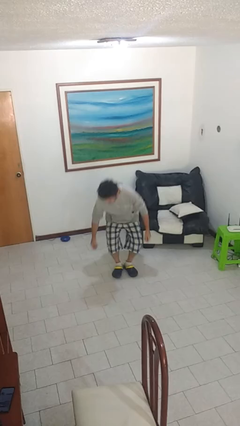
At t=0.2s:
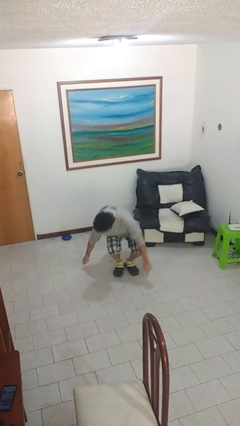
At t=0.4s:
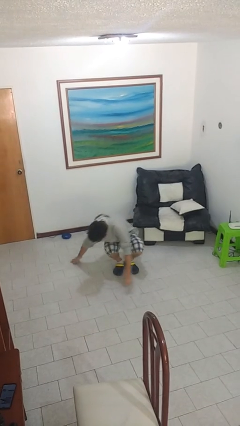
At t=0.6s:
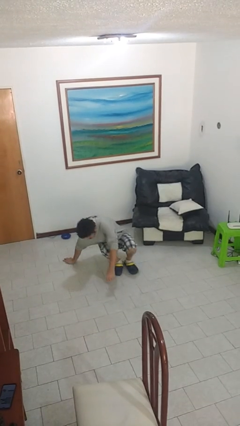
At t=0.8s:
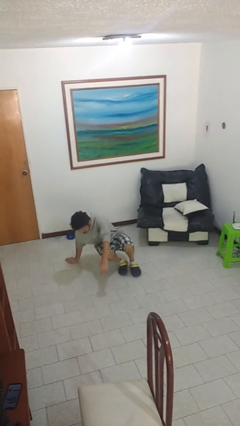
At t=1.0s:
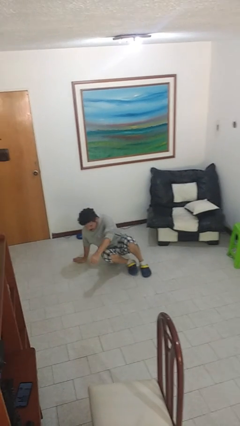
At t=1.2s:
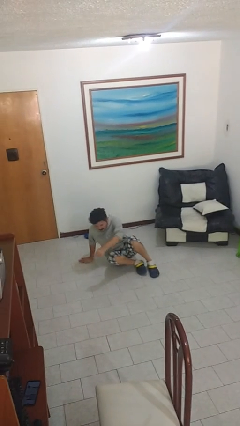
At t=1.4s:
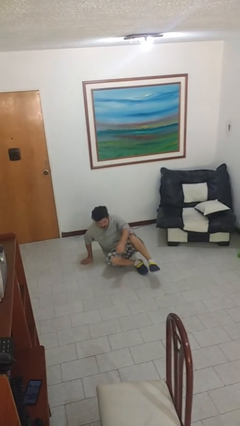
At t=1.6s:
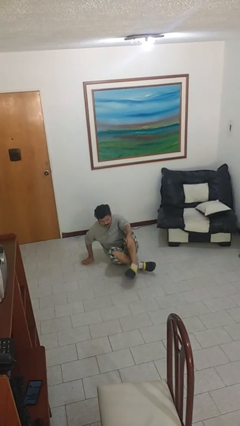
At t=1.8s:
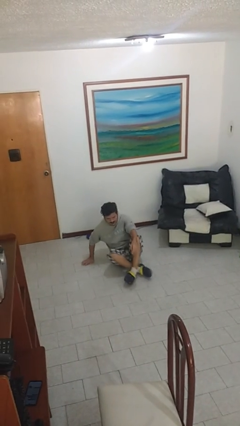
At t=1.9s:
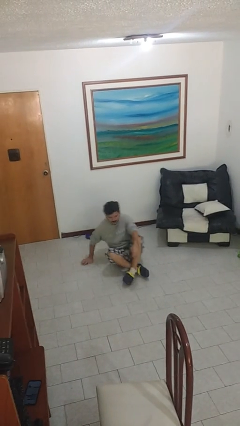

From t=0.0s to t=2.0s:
person sits crisscross

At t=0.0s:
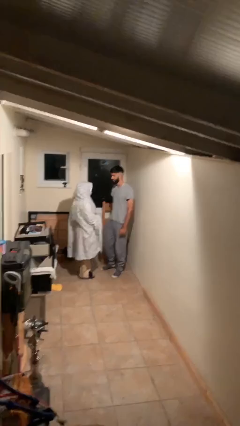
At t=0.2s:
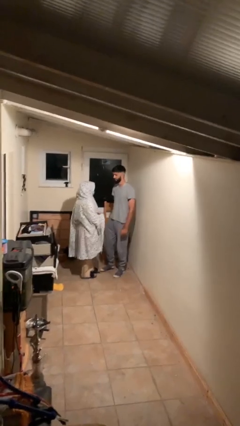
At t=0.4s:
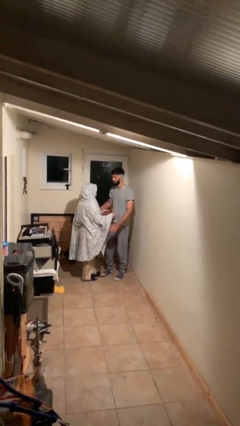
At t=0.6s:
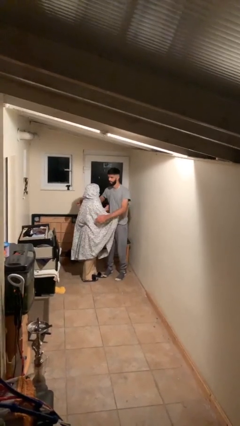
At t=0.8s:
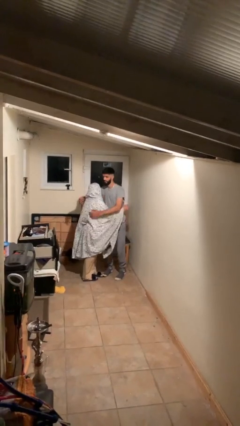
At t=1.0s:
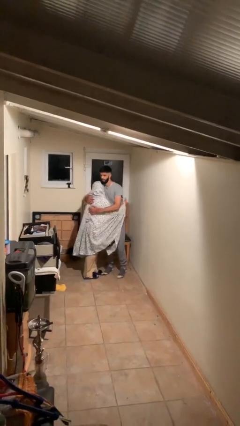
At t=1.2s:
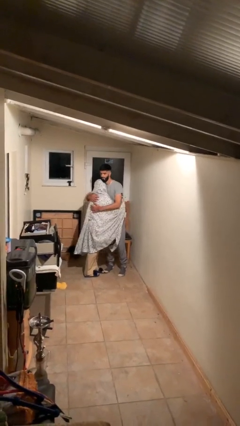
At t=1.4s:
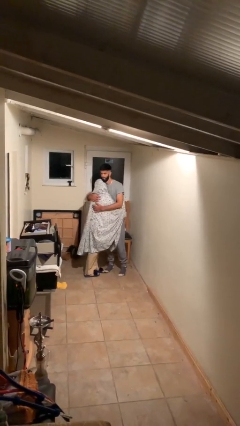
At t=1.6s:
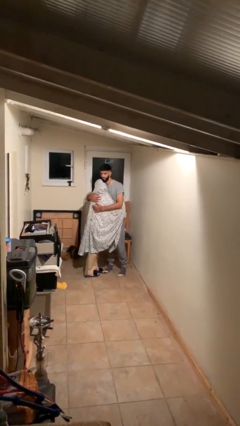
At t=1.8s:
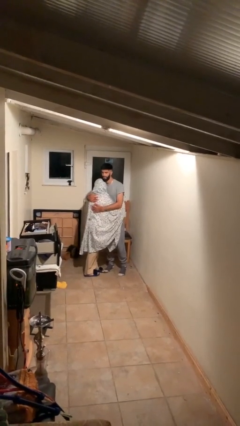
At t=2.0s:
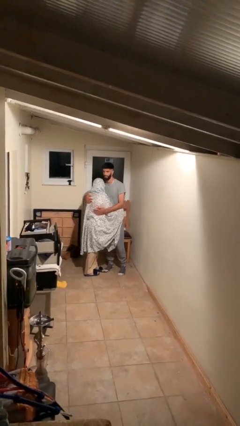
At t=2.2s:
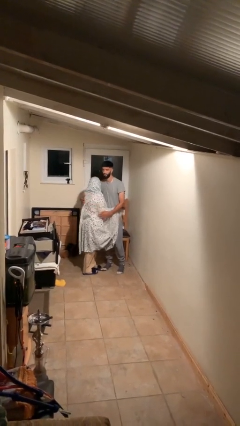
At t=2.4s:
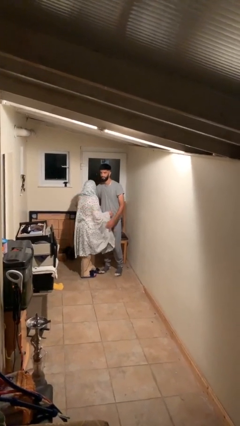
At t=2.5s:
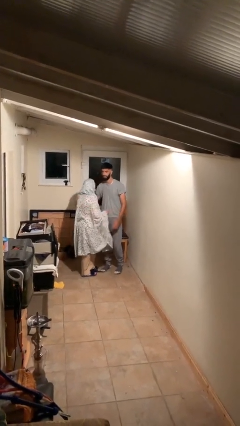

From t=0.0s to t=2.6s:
person embraces person

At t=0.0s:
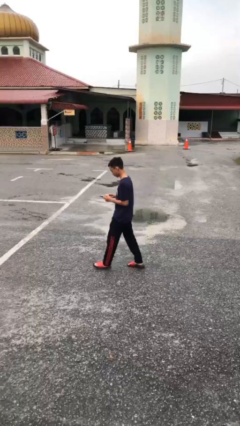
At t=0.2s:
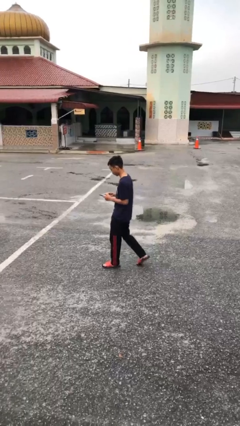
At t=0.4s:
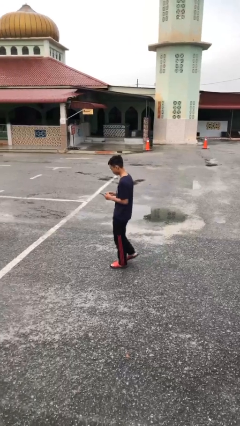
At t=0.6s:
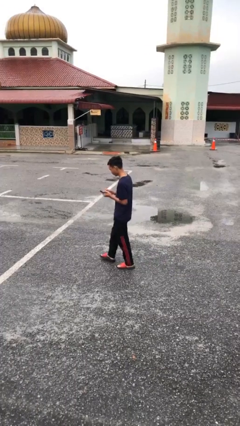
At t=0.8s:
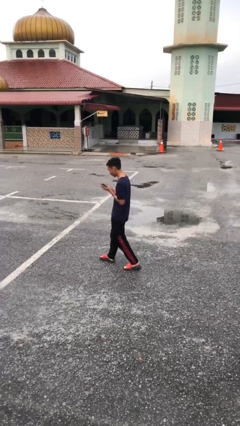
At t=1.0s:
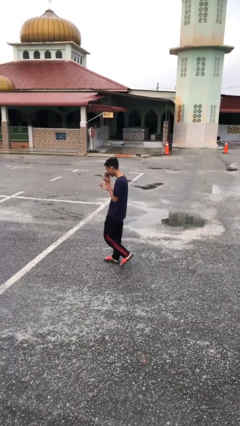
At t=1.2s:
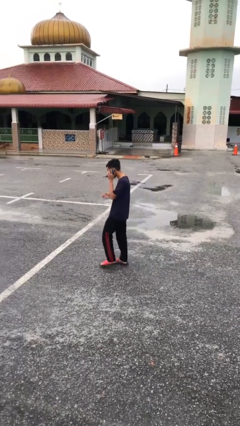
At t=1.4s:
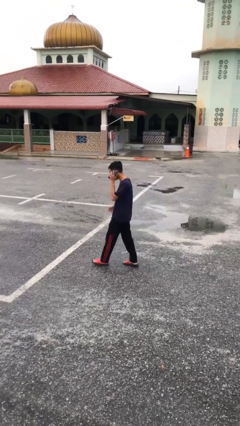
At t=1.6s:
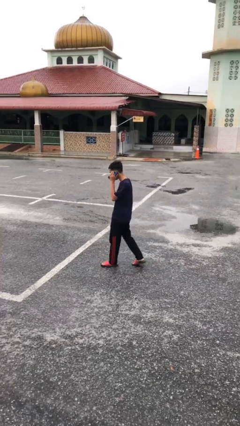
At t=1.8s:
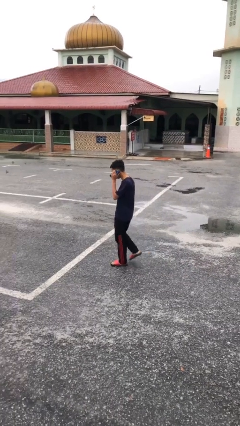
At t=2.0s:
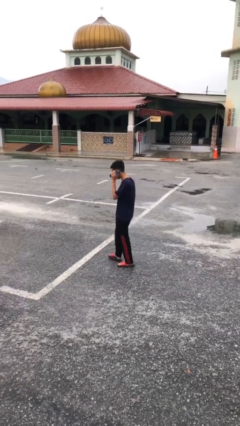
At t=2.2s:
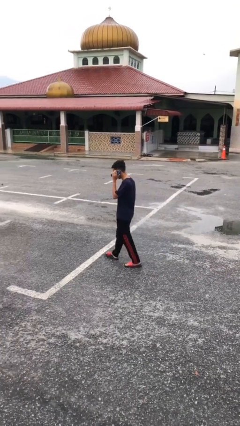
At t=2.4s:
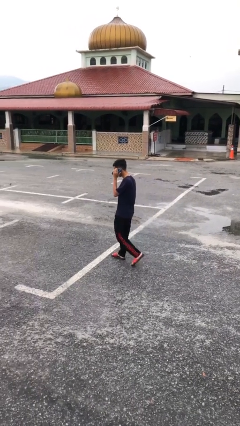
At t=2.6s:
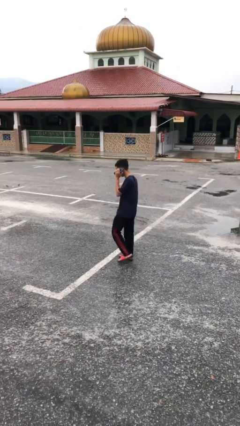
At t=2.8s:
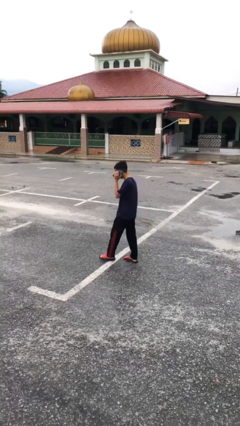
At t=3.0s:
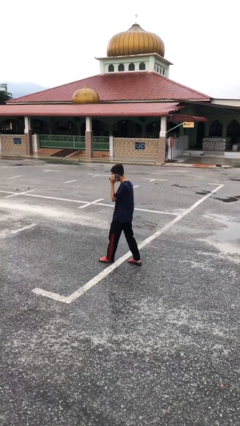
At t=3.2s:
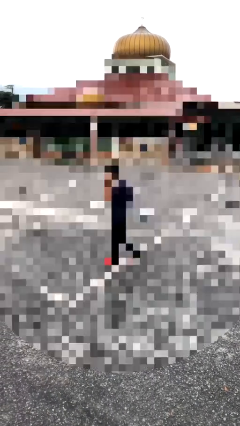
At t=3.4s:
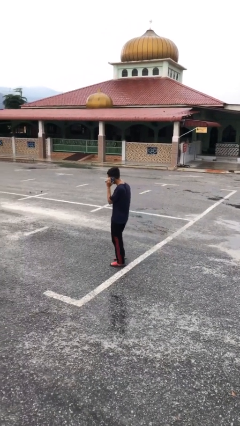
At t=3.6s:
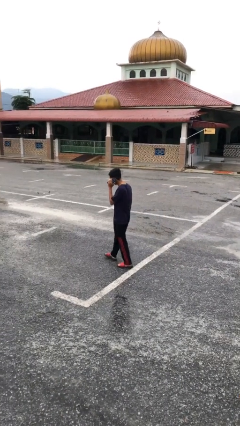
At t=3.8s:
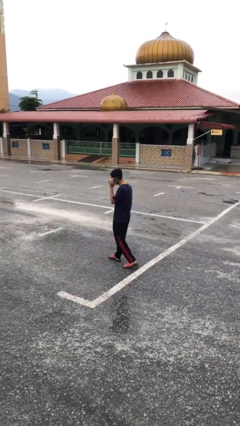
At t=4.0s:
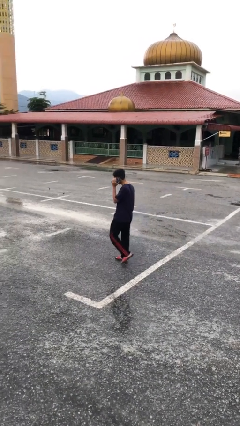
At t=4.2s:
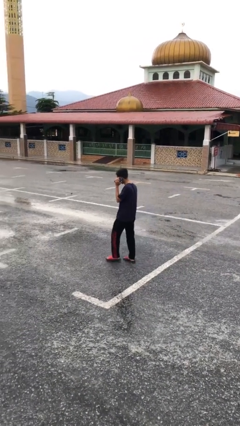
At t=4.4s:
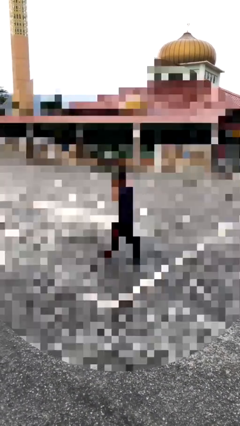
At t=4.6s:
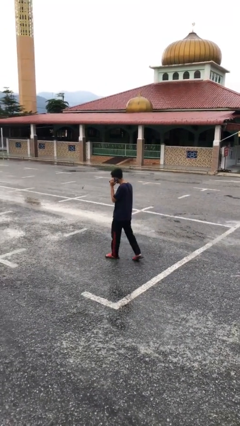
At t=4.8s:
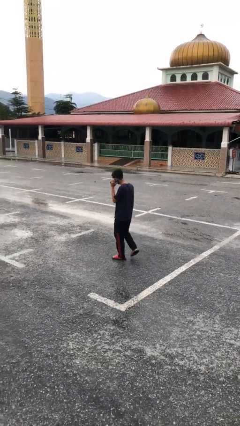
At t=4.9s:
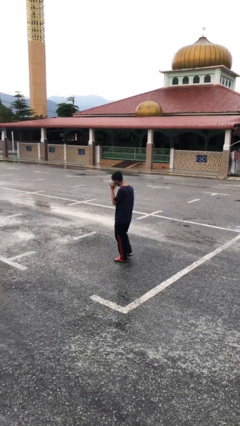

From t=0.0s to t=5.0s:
person talks on phone

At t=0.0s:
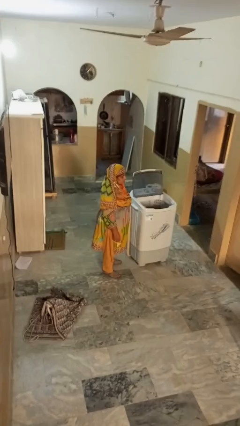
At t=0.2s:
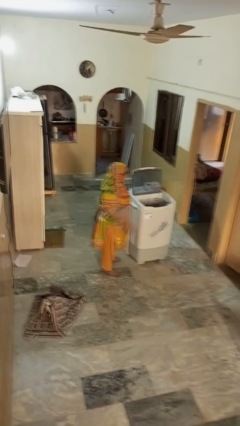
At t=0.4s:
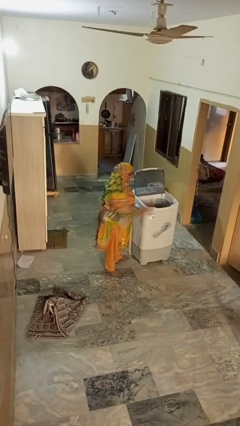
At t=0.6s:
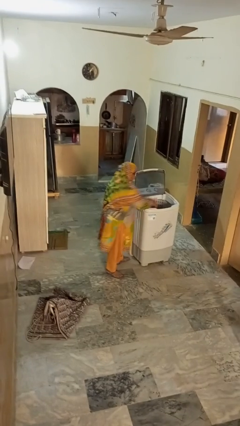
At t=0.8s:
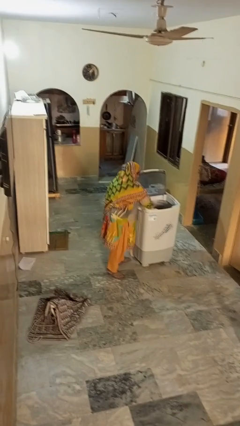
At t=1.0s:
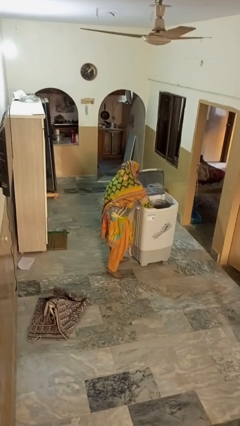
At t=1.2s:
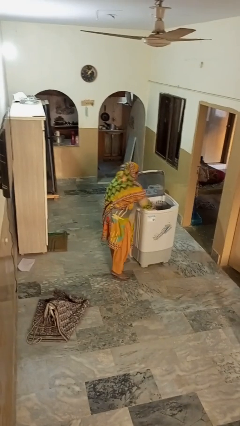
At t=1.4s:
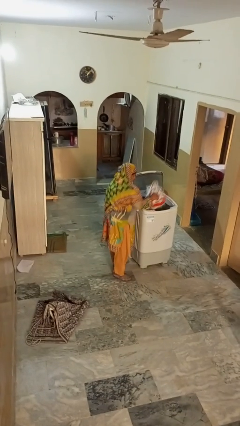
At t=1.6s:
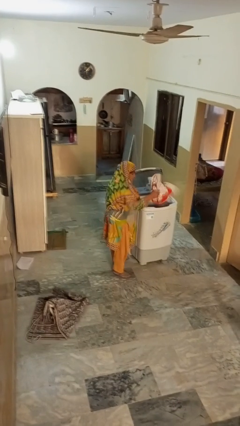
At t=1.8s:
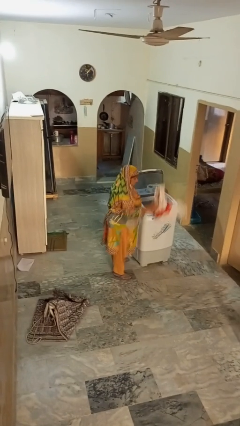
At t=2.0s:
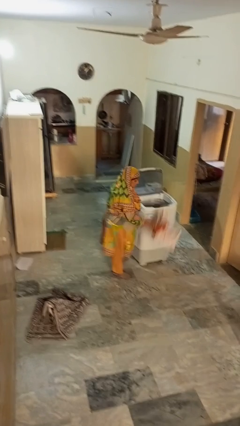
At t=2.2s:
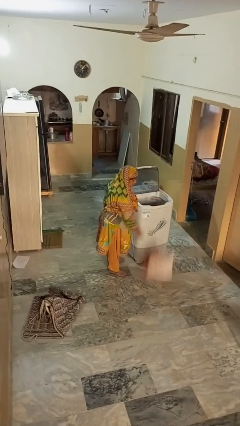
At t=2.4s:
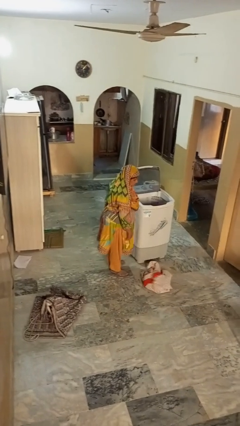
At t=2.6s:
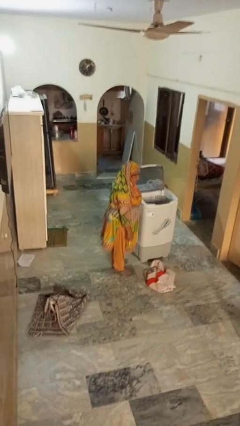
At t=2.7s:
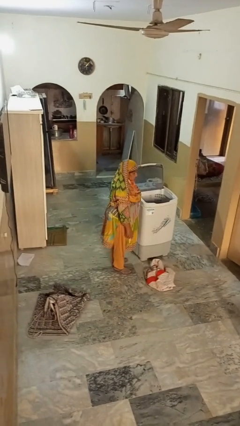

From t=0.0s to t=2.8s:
person unloads clotheswasher

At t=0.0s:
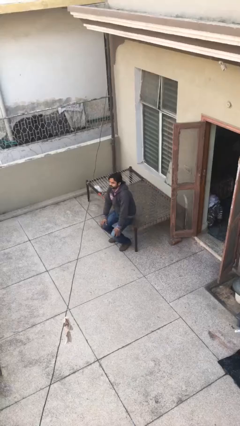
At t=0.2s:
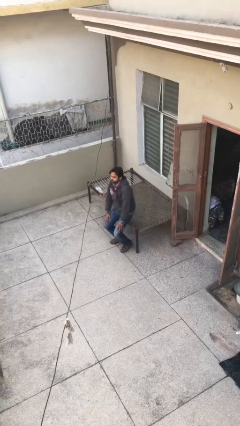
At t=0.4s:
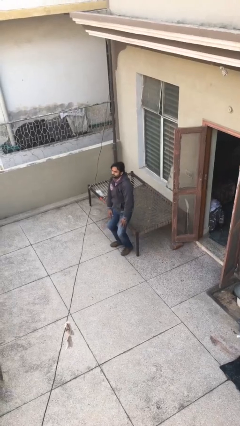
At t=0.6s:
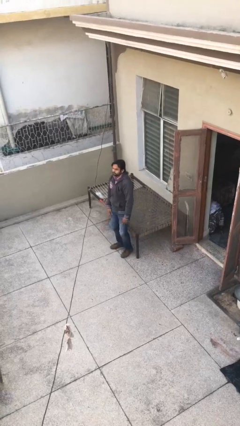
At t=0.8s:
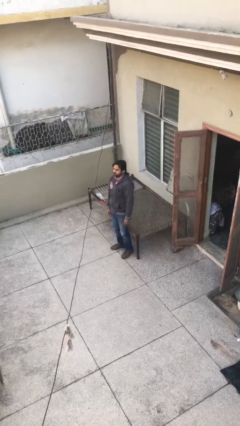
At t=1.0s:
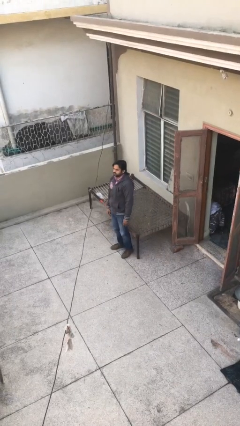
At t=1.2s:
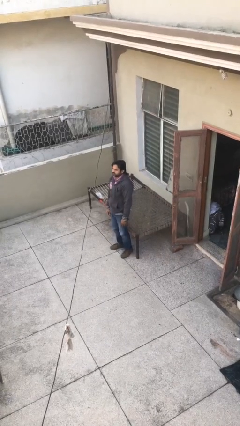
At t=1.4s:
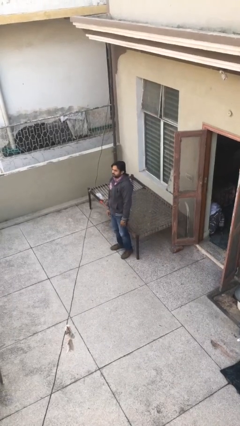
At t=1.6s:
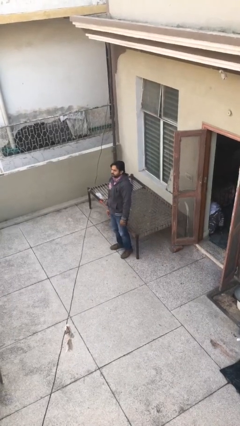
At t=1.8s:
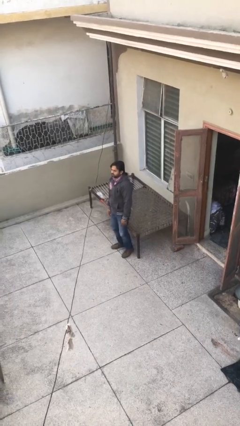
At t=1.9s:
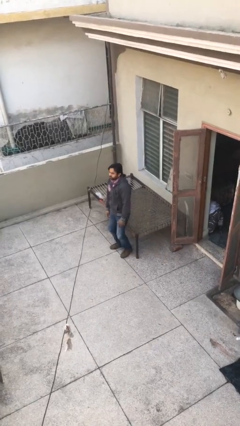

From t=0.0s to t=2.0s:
person stands up

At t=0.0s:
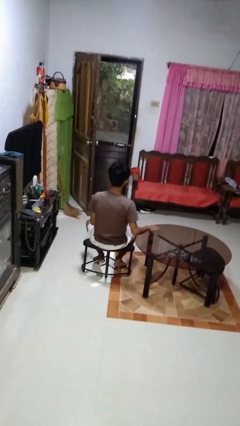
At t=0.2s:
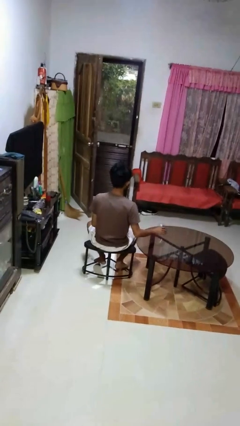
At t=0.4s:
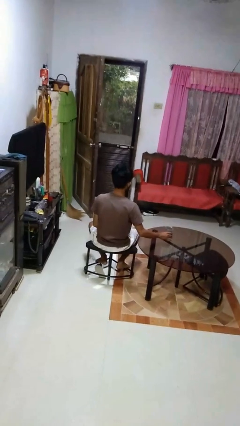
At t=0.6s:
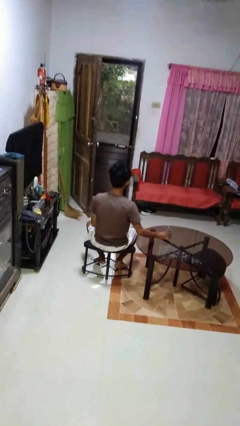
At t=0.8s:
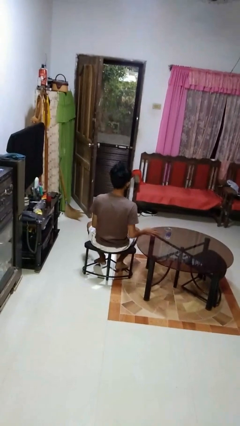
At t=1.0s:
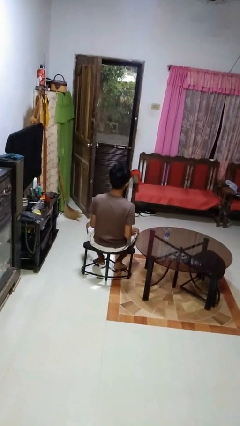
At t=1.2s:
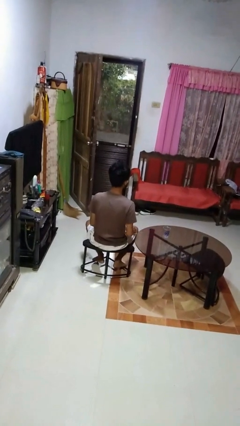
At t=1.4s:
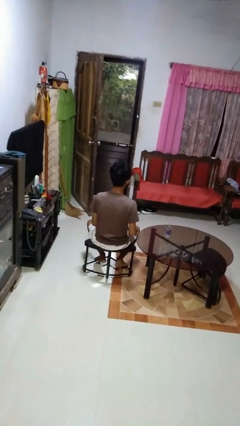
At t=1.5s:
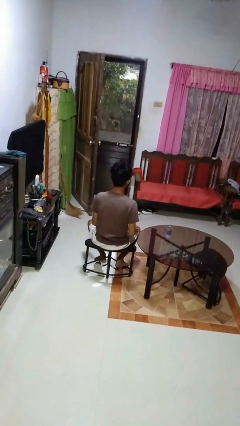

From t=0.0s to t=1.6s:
person sets upright glass

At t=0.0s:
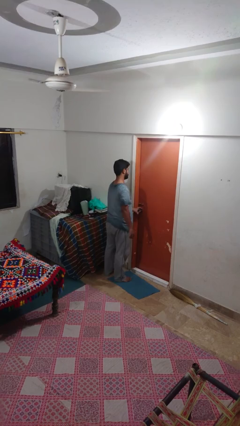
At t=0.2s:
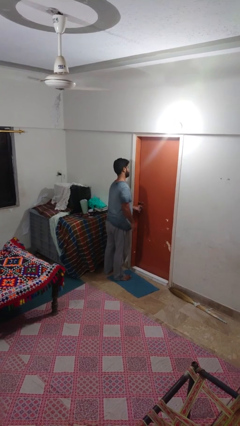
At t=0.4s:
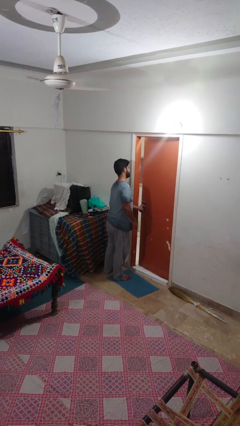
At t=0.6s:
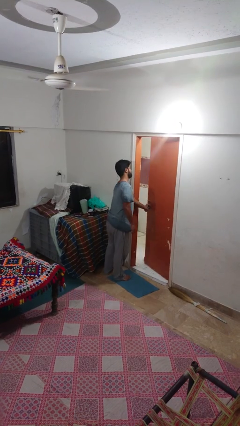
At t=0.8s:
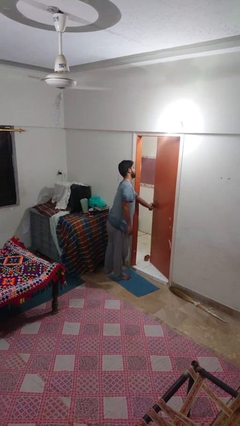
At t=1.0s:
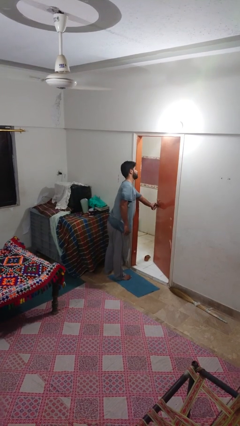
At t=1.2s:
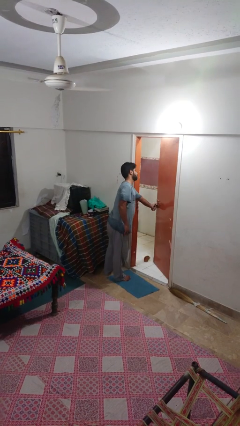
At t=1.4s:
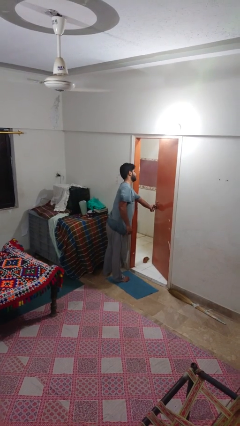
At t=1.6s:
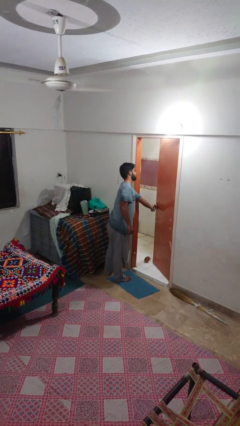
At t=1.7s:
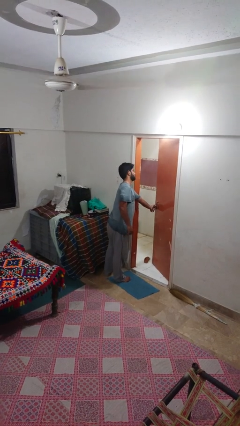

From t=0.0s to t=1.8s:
person opens facility door
